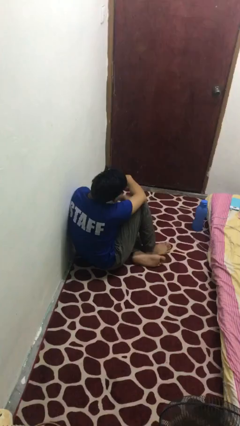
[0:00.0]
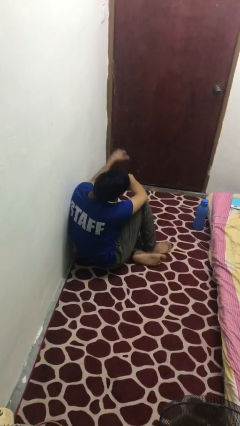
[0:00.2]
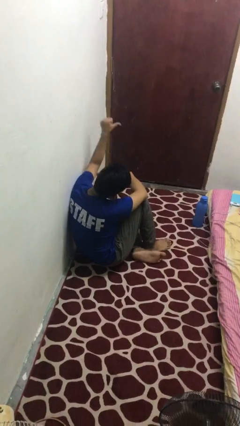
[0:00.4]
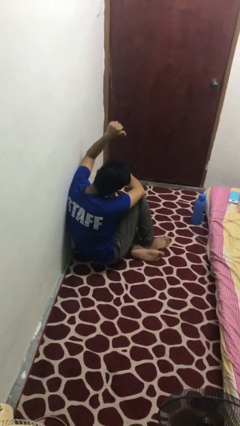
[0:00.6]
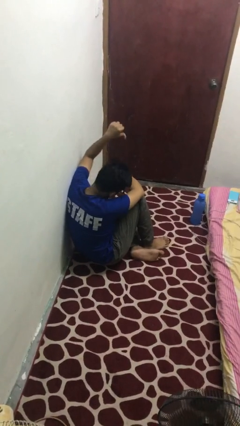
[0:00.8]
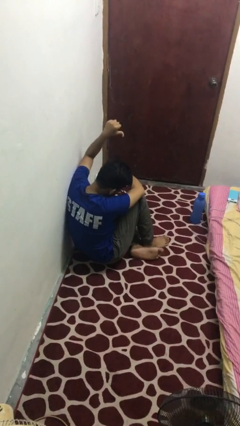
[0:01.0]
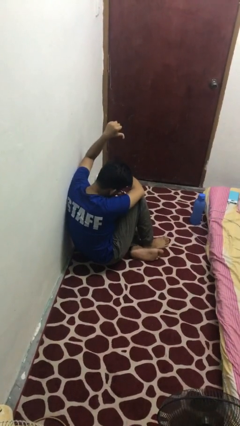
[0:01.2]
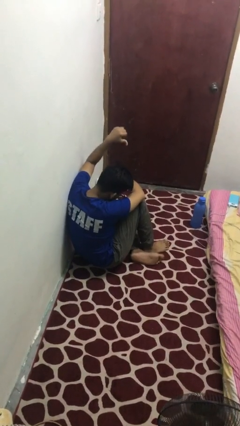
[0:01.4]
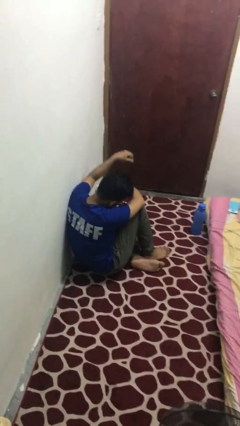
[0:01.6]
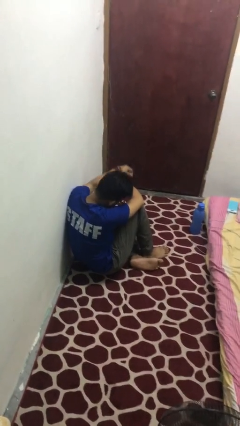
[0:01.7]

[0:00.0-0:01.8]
person gestures thumbs down

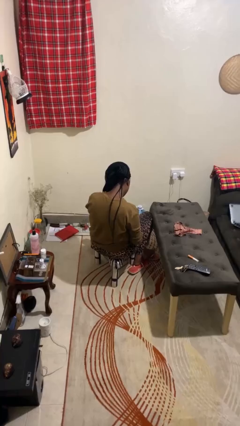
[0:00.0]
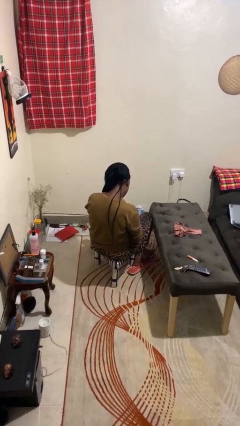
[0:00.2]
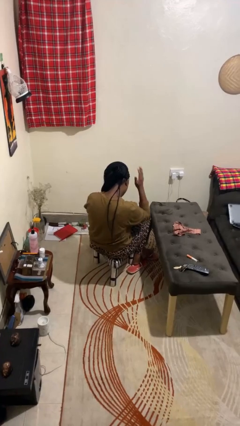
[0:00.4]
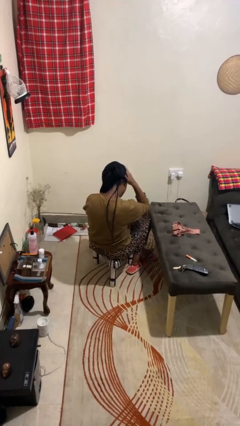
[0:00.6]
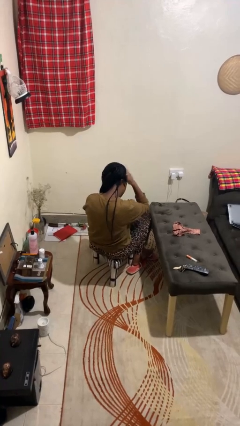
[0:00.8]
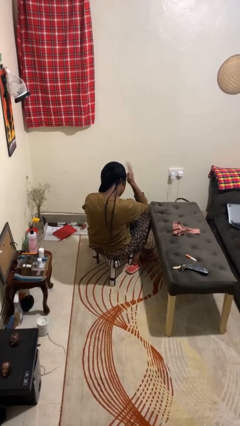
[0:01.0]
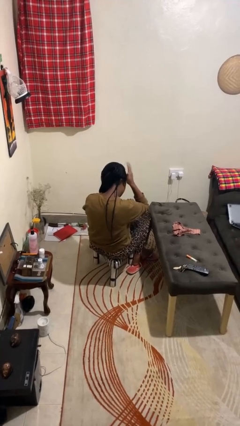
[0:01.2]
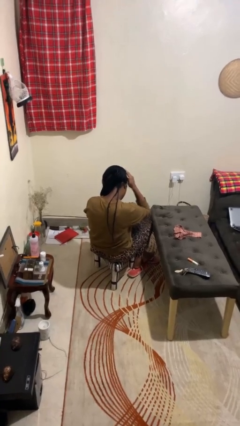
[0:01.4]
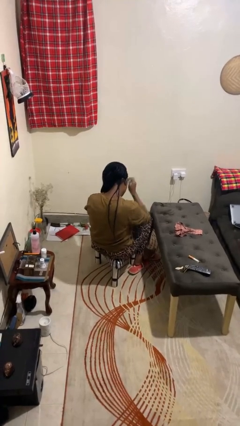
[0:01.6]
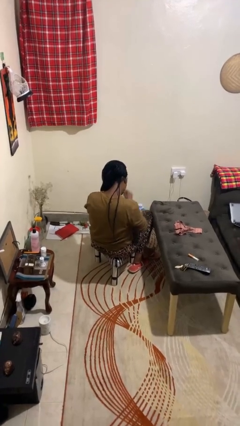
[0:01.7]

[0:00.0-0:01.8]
person pats head

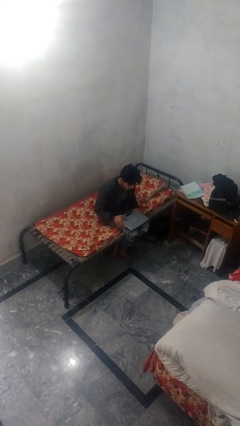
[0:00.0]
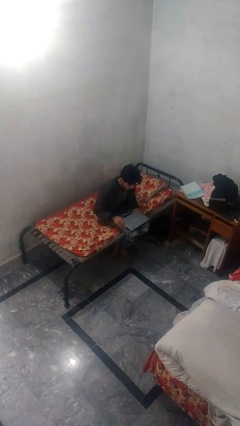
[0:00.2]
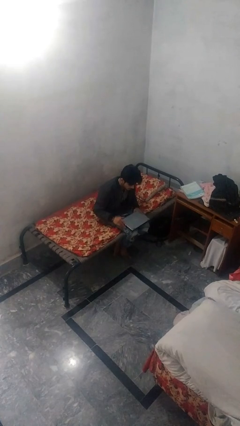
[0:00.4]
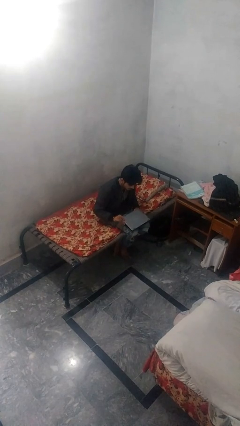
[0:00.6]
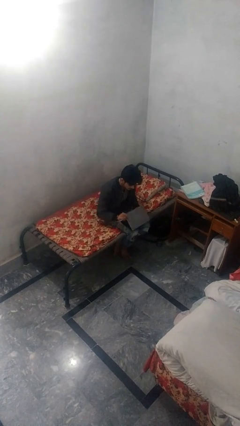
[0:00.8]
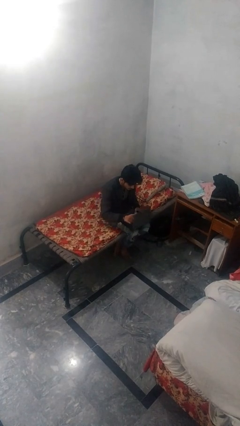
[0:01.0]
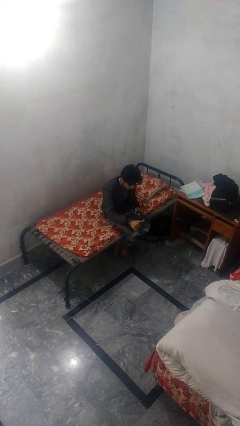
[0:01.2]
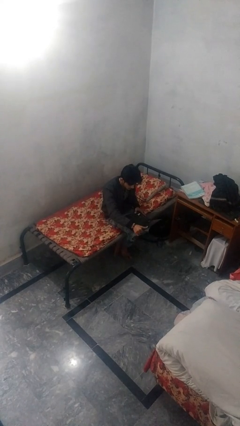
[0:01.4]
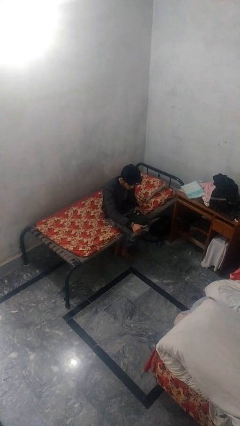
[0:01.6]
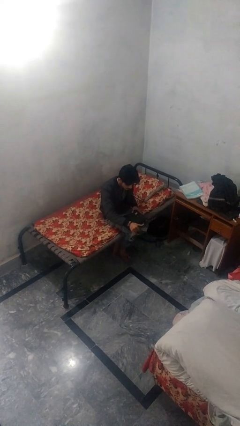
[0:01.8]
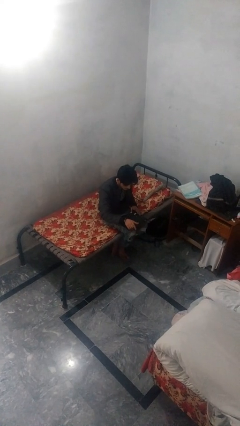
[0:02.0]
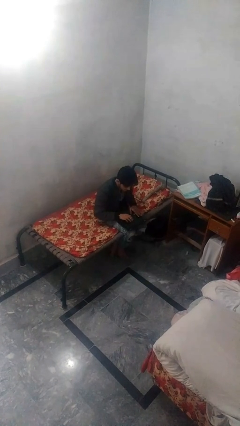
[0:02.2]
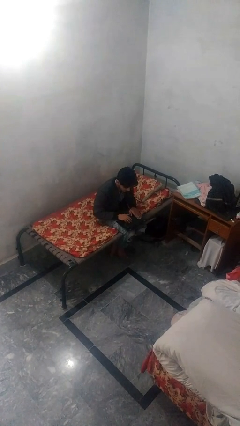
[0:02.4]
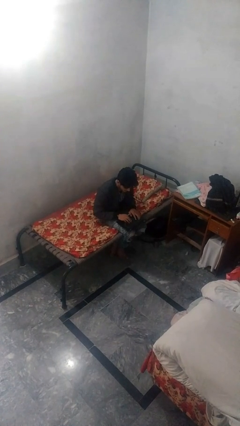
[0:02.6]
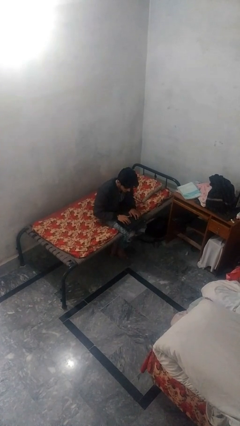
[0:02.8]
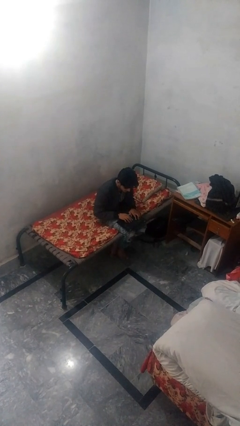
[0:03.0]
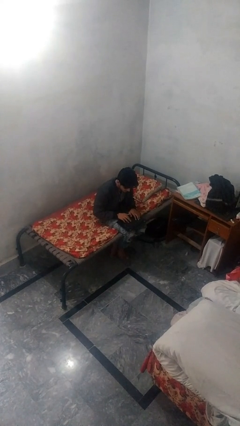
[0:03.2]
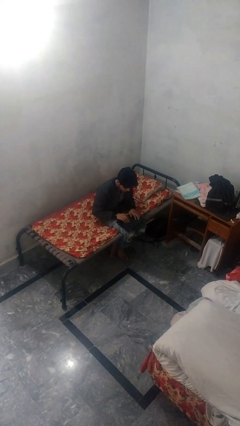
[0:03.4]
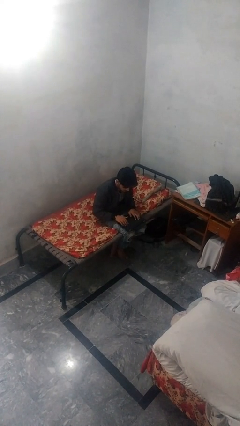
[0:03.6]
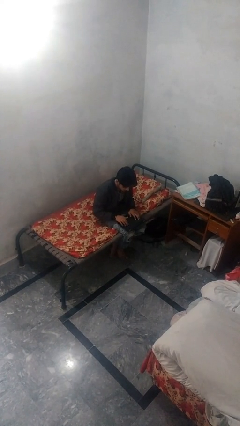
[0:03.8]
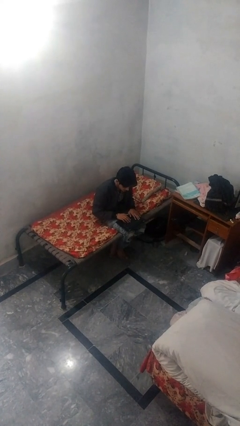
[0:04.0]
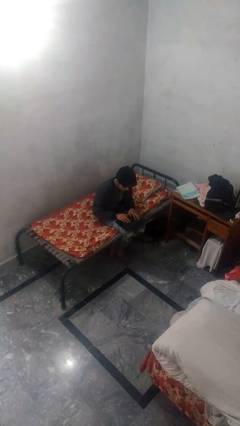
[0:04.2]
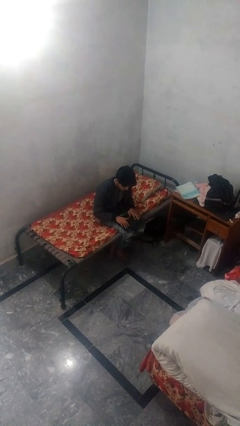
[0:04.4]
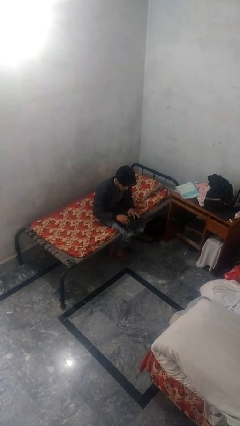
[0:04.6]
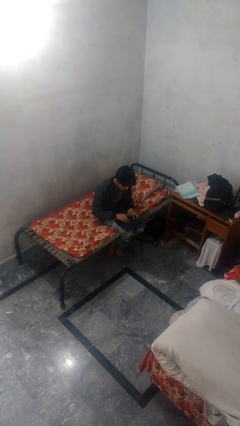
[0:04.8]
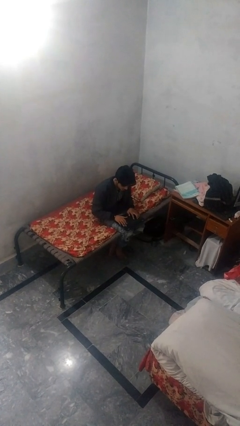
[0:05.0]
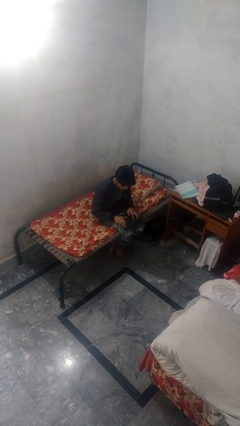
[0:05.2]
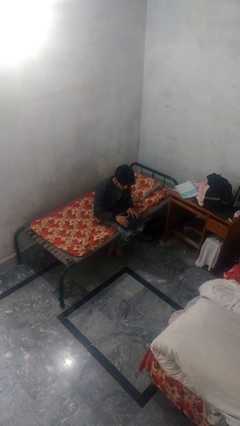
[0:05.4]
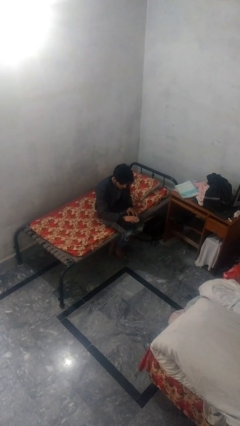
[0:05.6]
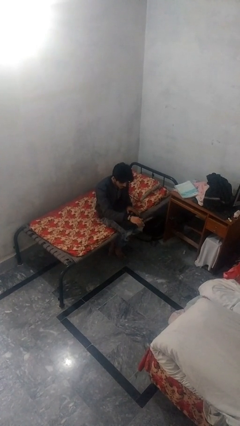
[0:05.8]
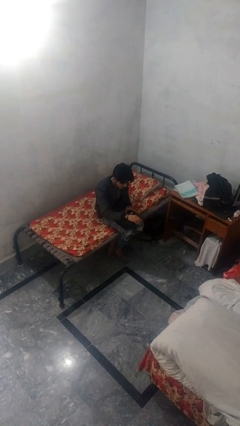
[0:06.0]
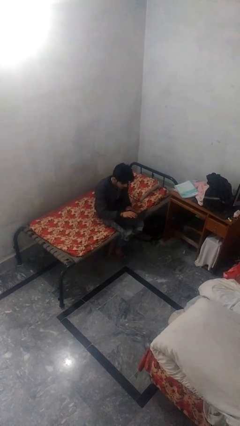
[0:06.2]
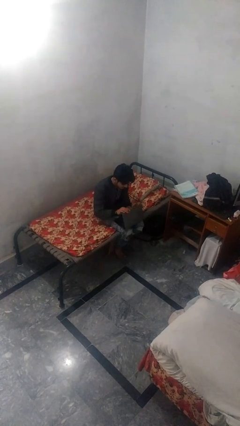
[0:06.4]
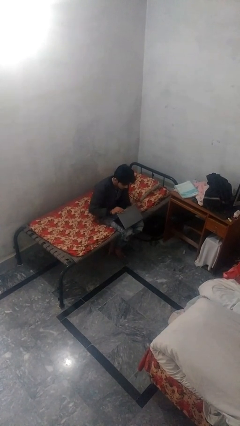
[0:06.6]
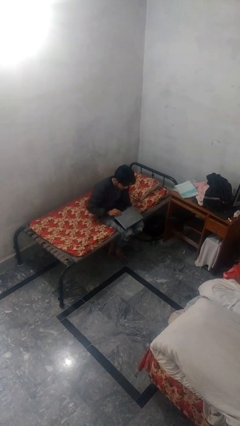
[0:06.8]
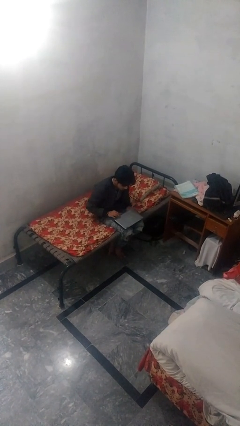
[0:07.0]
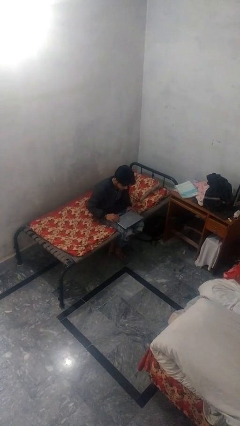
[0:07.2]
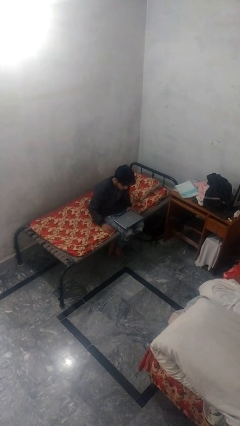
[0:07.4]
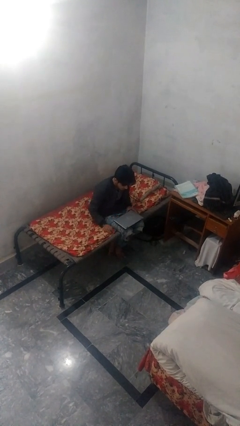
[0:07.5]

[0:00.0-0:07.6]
person interacts with laptop

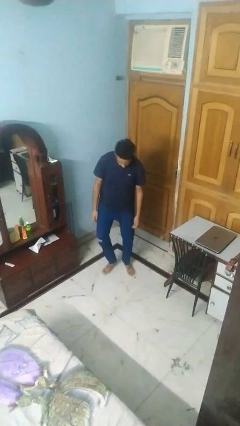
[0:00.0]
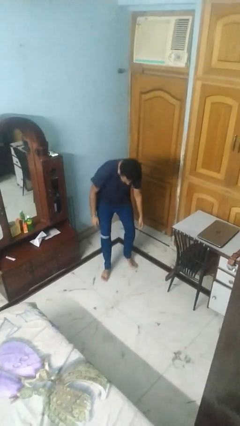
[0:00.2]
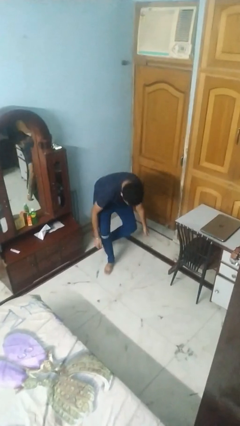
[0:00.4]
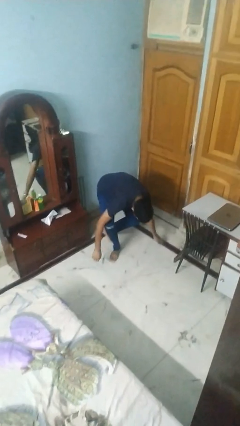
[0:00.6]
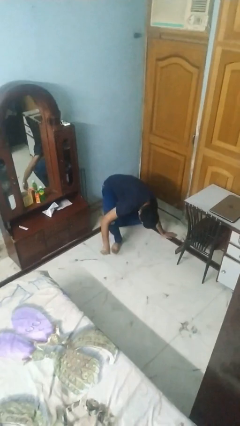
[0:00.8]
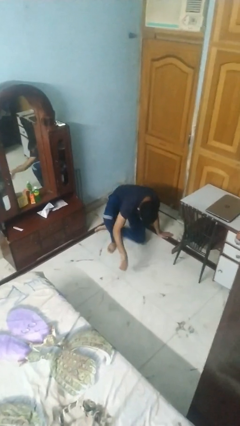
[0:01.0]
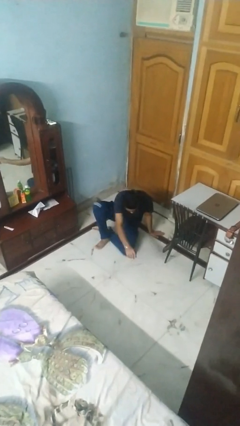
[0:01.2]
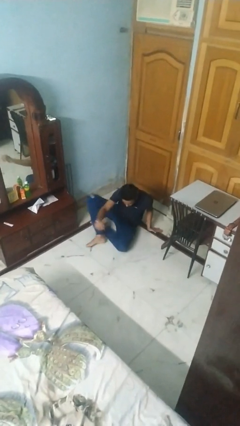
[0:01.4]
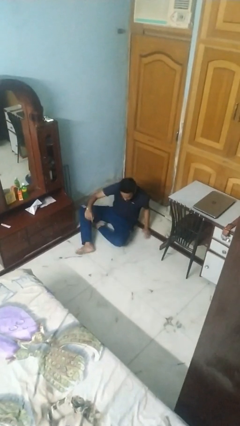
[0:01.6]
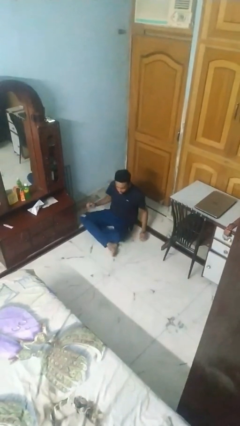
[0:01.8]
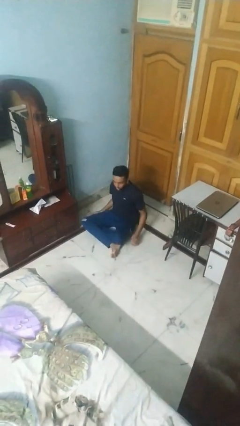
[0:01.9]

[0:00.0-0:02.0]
person sits crisscross

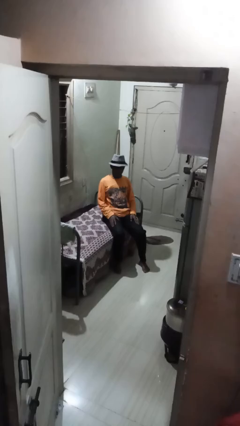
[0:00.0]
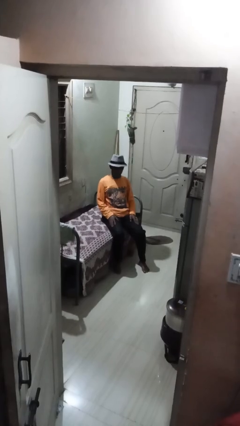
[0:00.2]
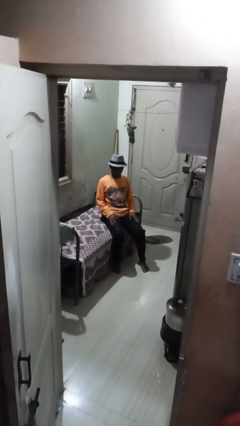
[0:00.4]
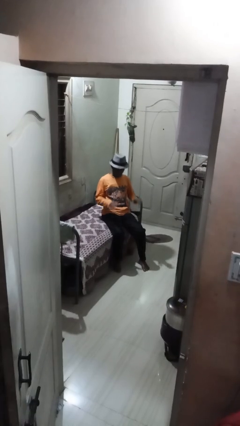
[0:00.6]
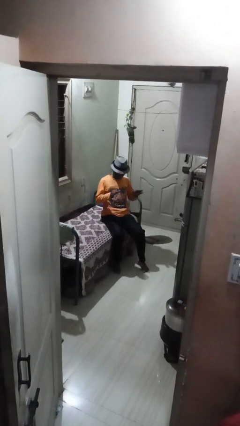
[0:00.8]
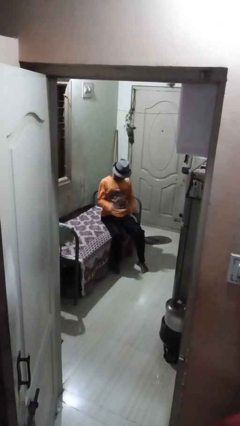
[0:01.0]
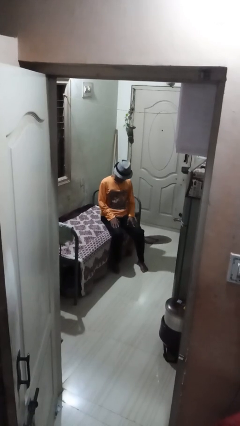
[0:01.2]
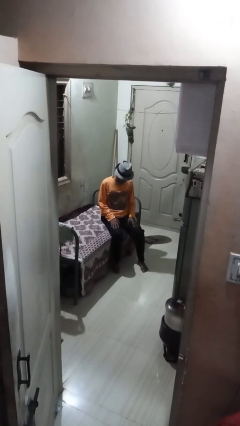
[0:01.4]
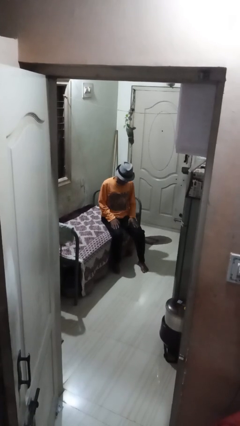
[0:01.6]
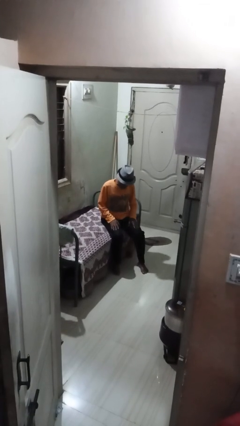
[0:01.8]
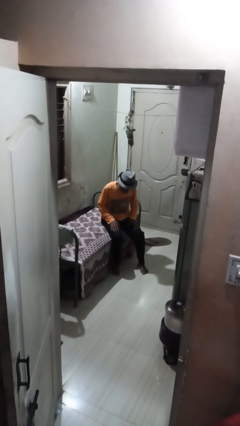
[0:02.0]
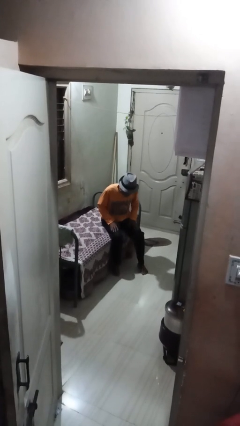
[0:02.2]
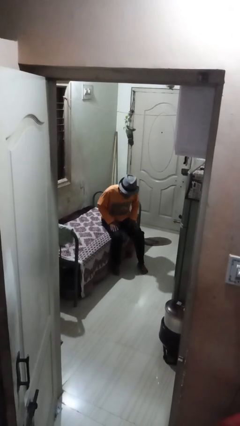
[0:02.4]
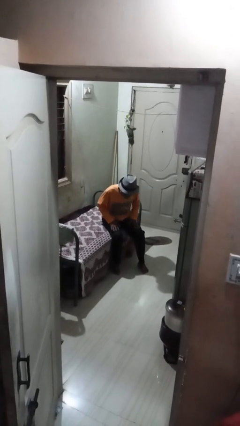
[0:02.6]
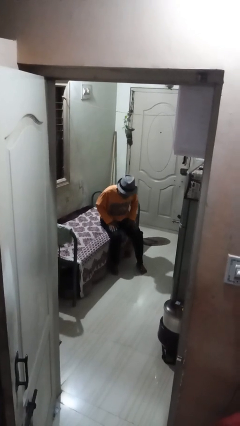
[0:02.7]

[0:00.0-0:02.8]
person slaps hands on thighs

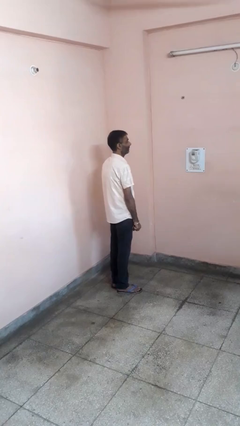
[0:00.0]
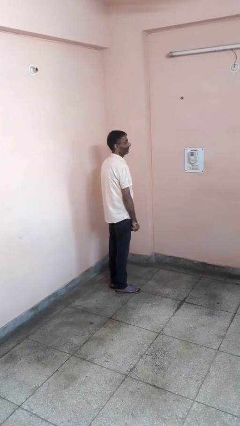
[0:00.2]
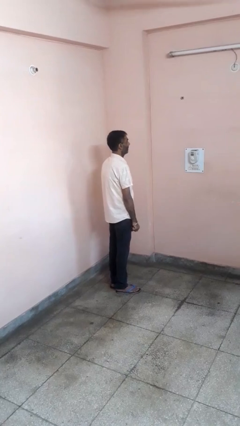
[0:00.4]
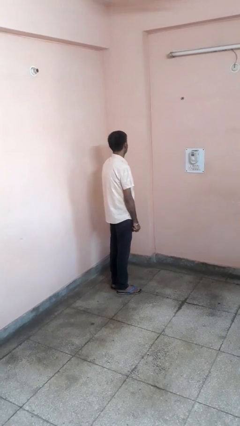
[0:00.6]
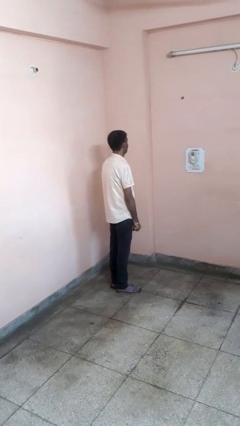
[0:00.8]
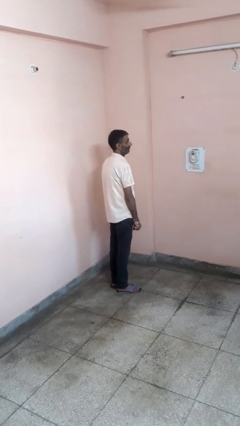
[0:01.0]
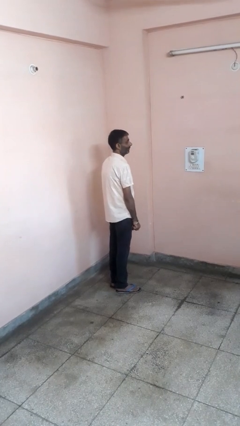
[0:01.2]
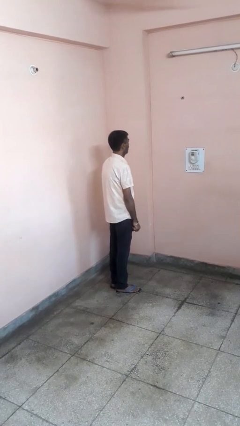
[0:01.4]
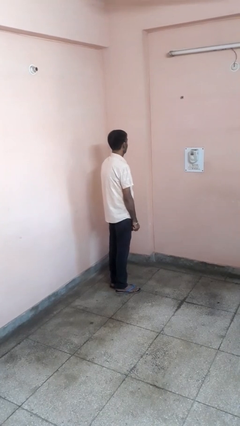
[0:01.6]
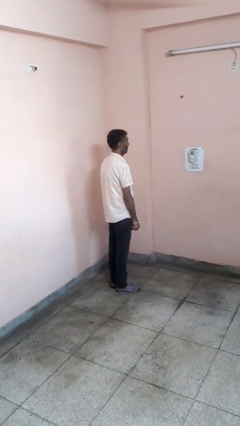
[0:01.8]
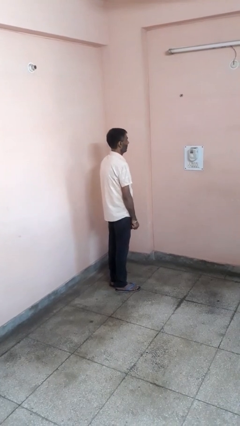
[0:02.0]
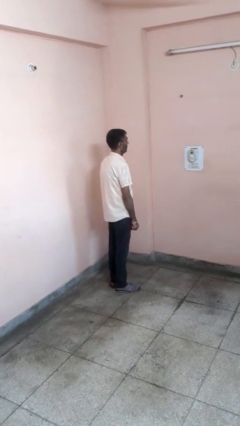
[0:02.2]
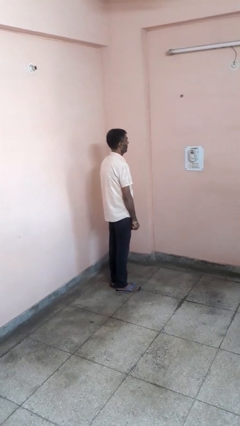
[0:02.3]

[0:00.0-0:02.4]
person shakes head
